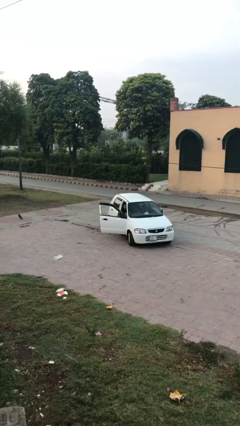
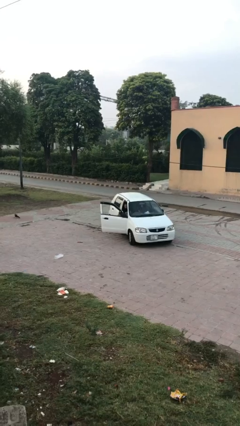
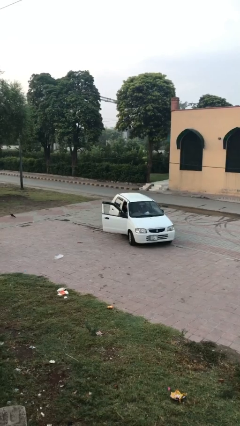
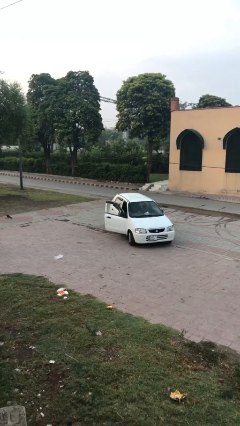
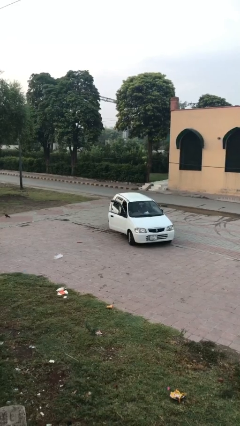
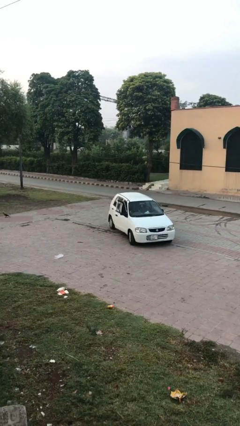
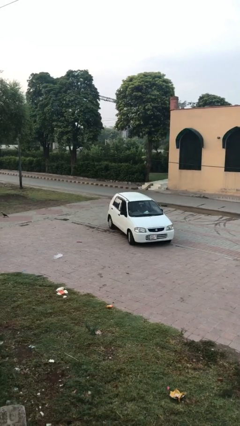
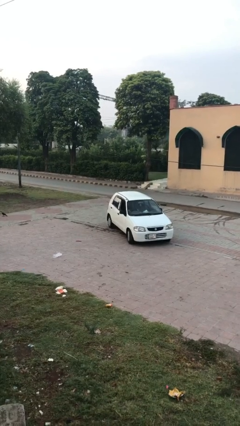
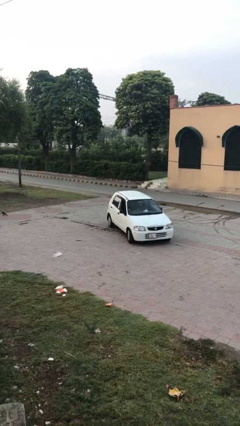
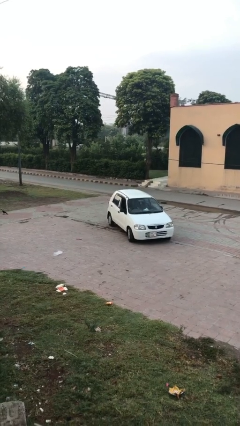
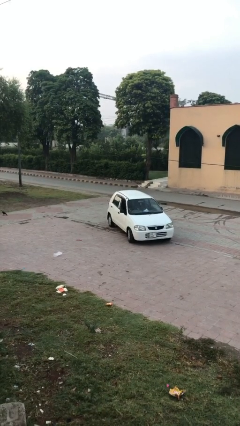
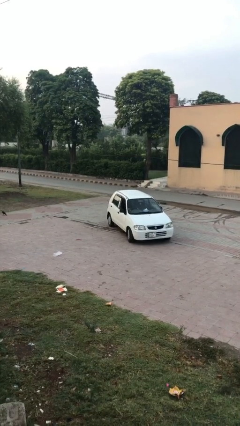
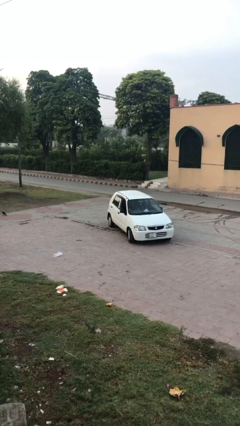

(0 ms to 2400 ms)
person closes car door

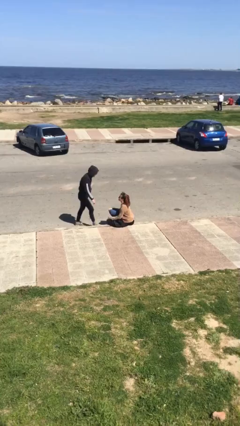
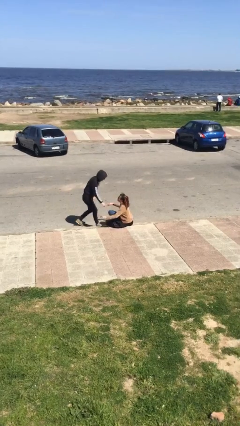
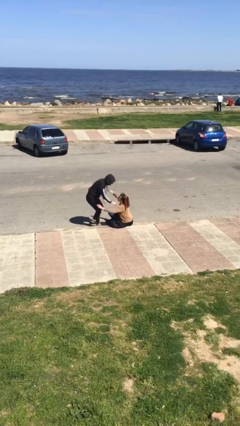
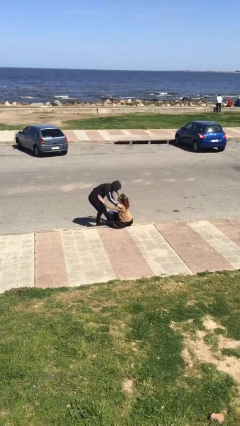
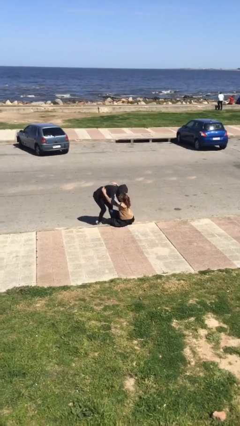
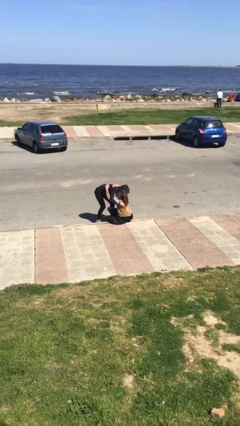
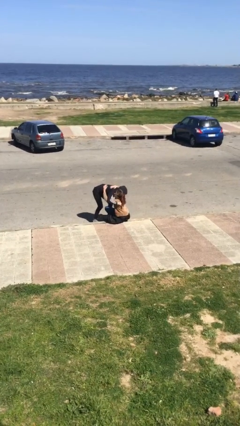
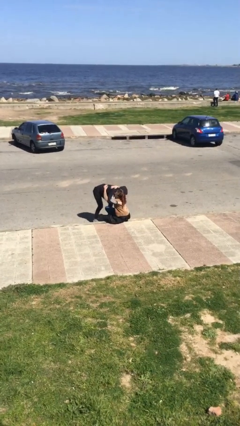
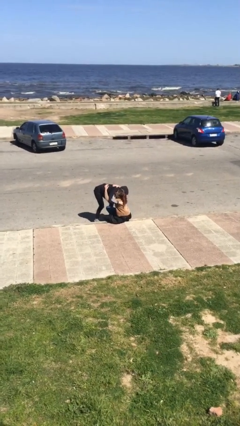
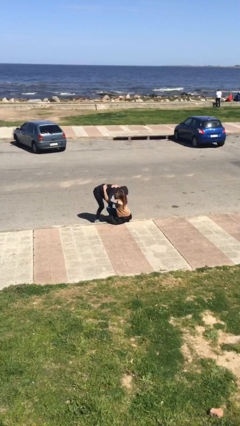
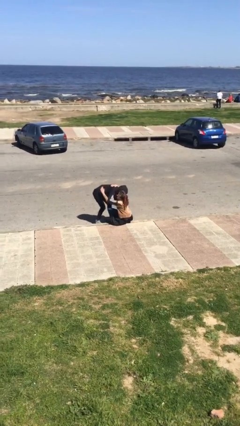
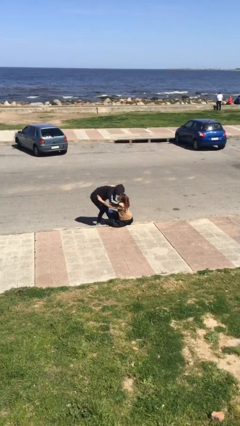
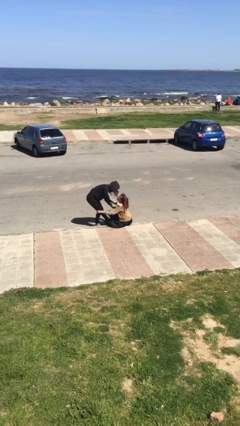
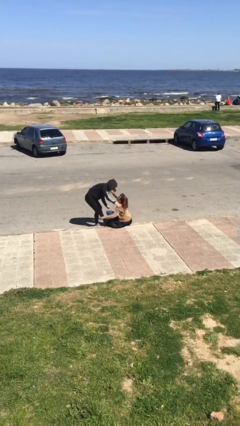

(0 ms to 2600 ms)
person embraces person

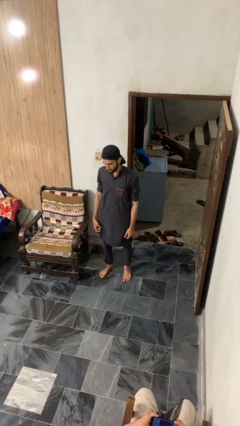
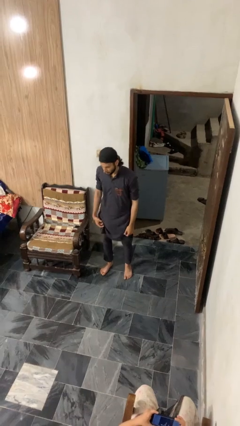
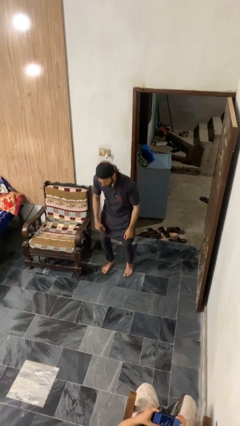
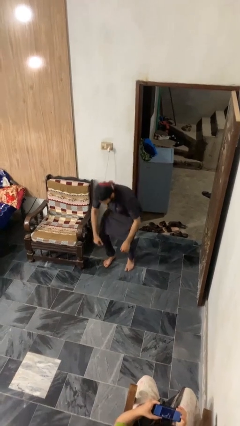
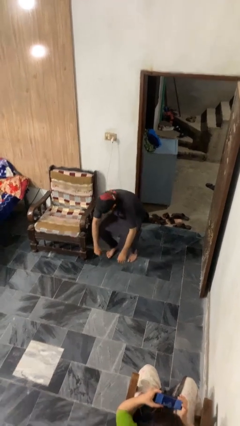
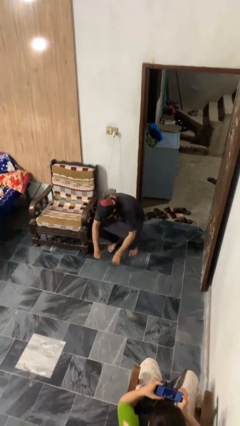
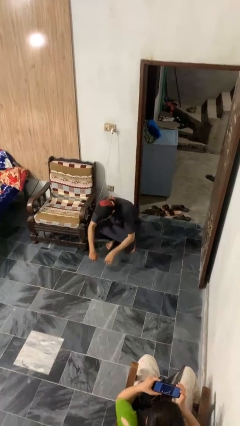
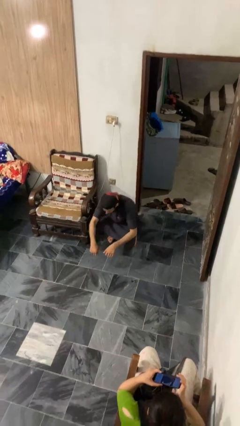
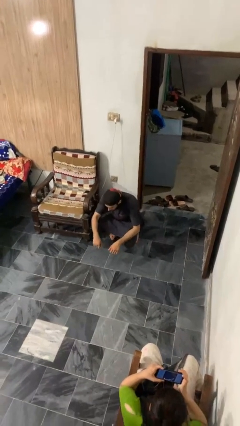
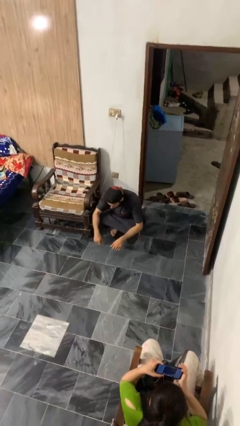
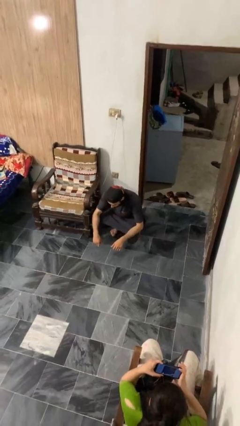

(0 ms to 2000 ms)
person squats

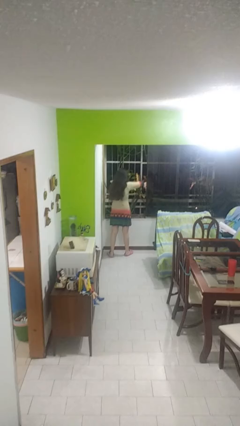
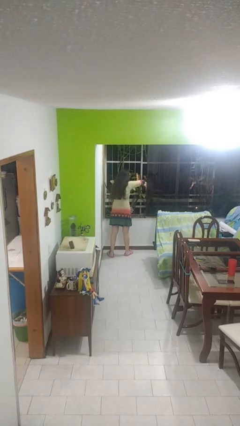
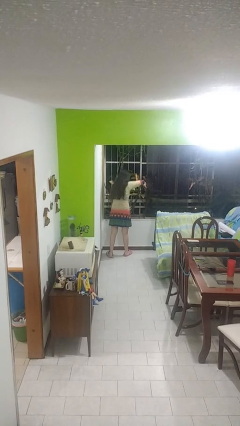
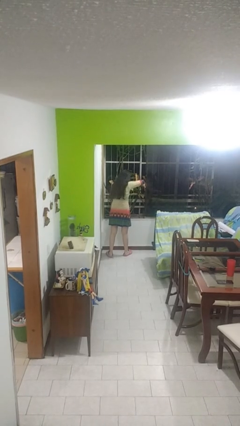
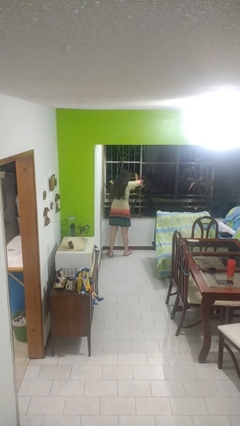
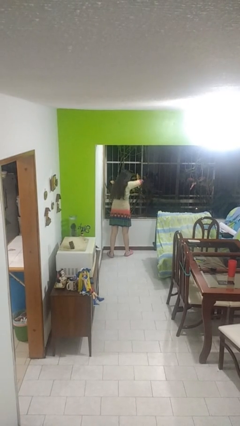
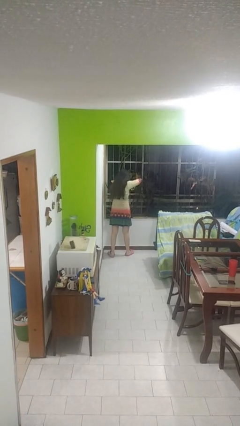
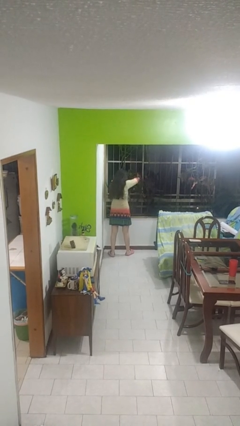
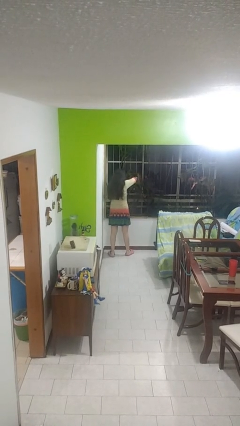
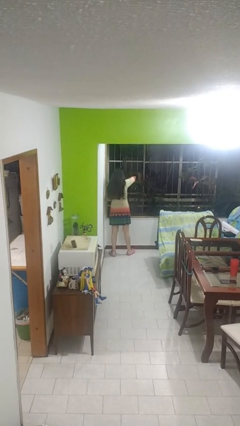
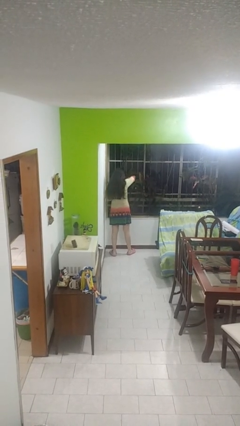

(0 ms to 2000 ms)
person closes home window

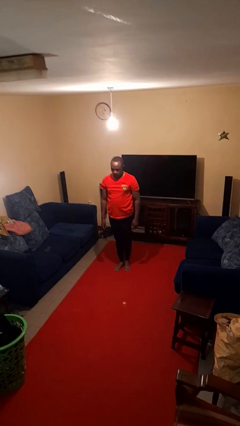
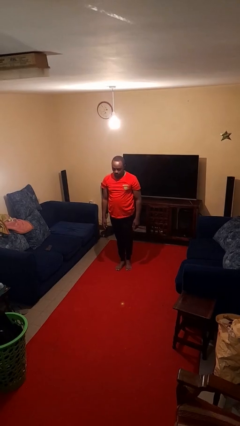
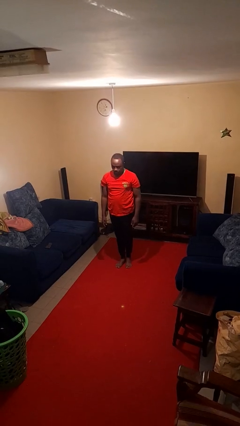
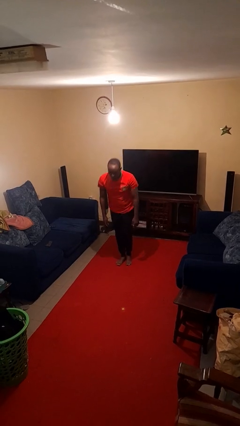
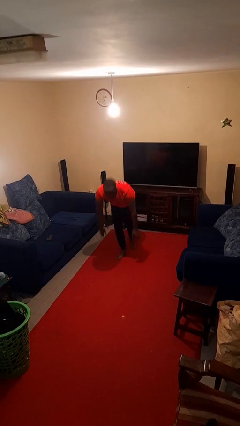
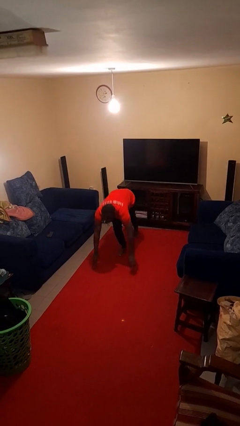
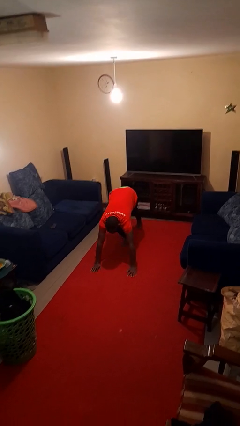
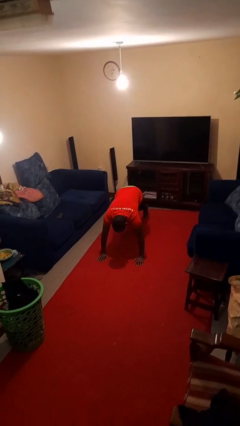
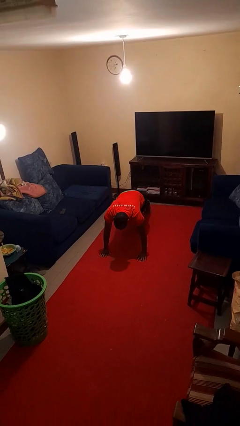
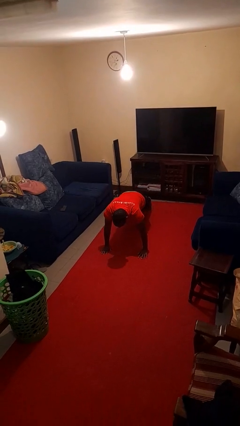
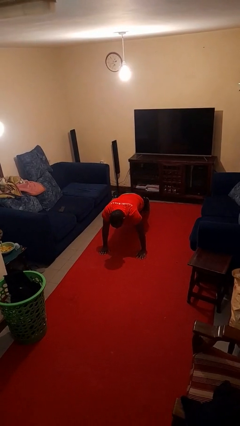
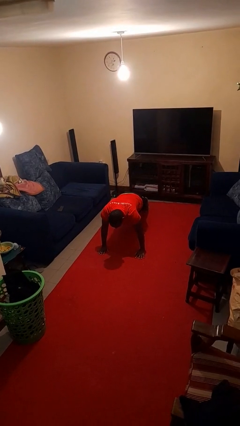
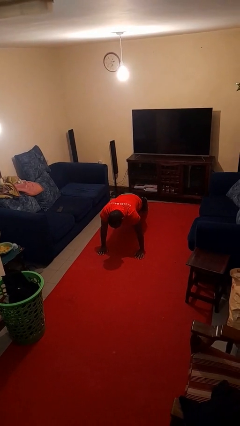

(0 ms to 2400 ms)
person exercises with plank

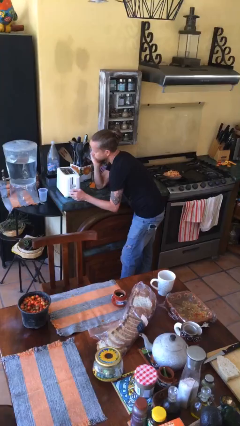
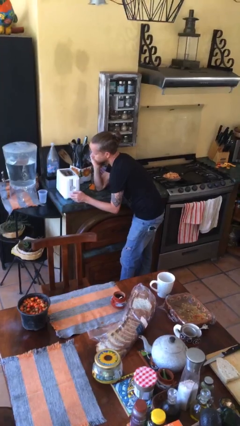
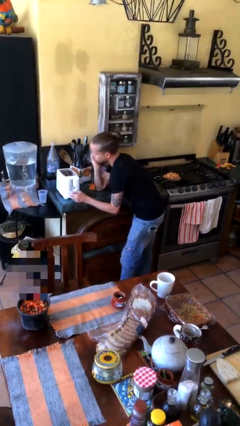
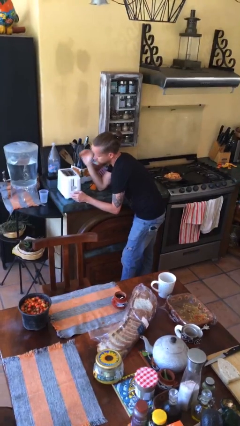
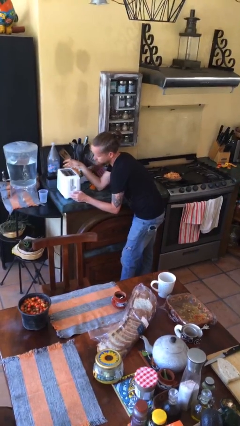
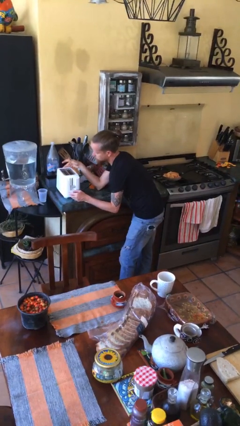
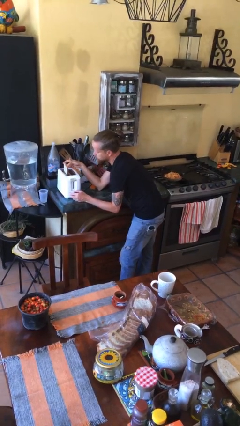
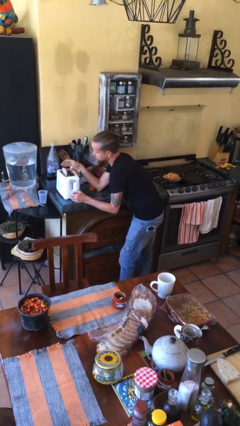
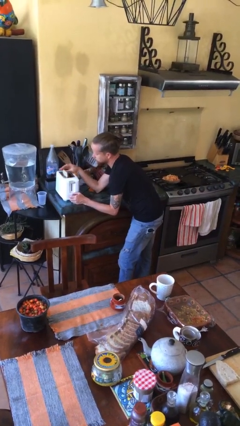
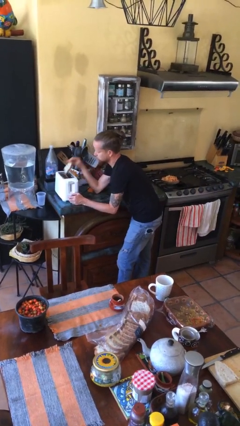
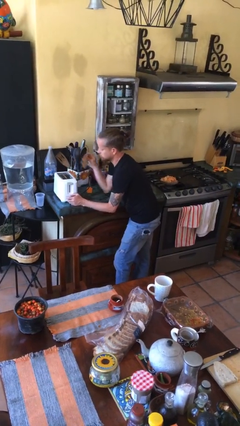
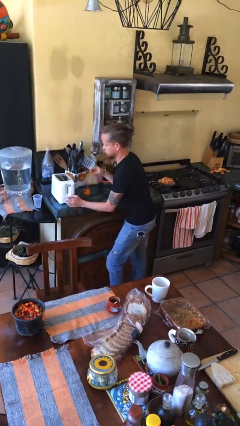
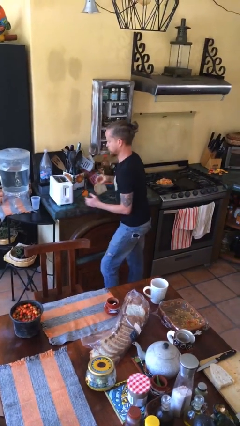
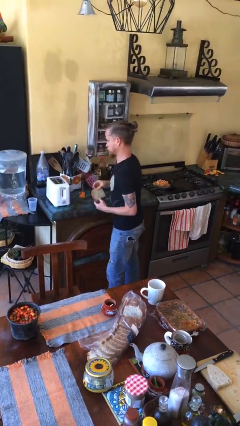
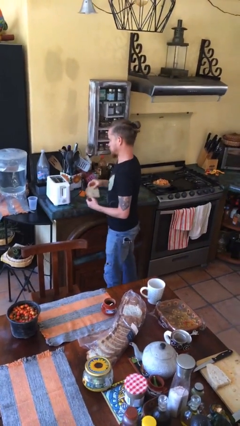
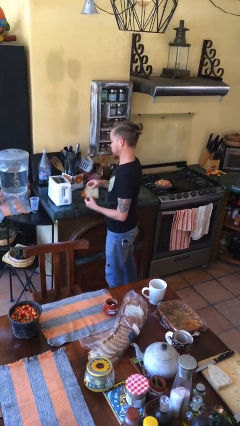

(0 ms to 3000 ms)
person takes object from toaster

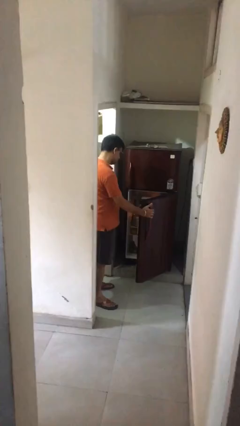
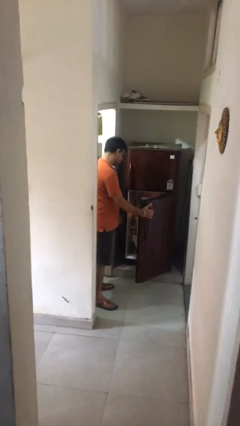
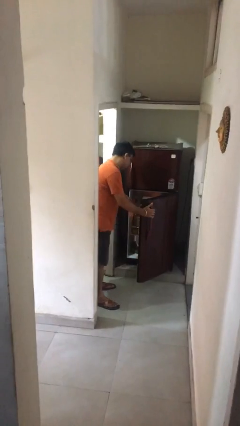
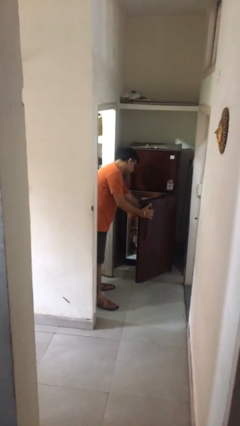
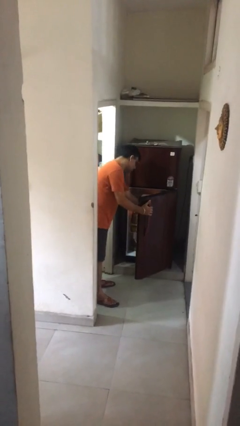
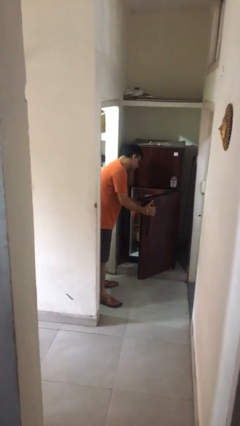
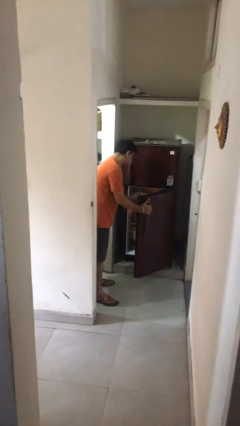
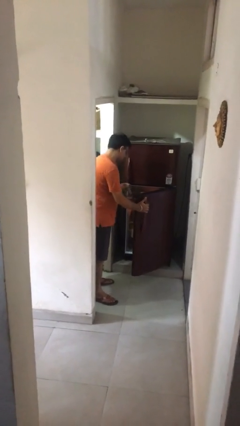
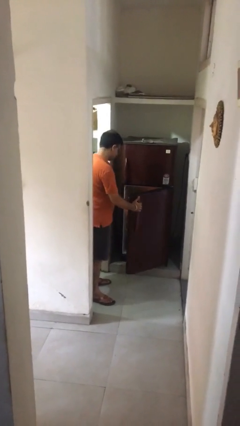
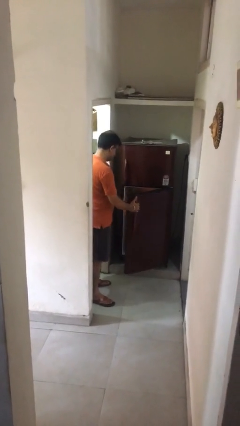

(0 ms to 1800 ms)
person takes object from refrigerator

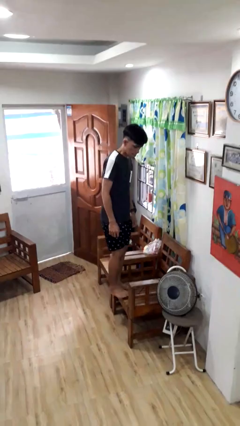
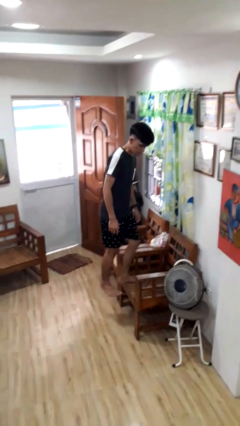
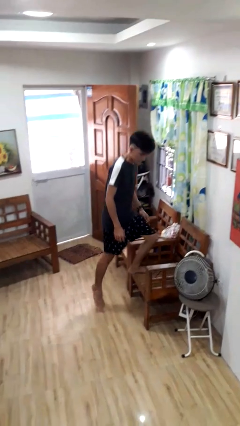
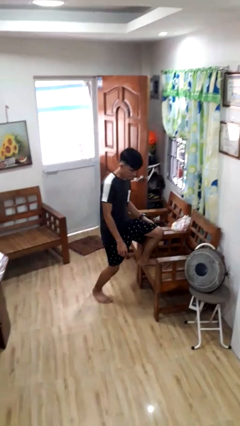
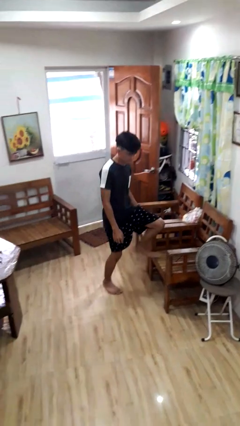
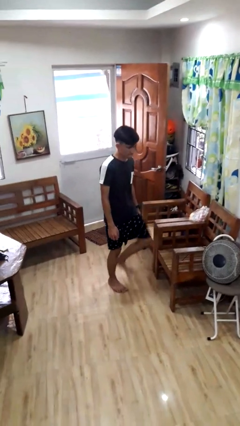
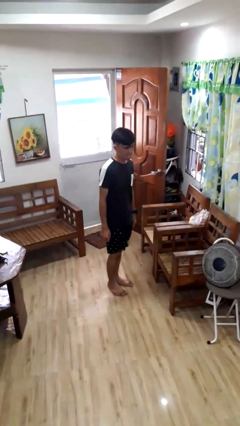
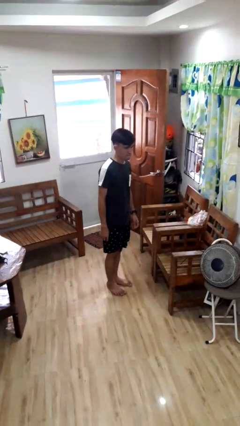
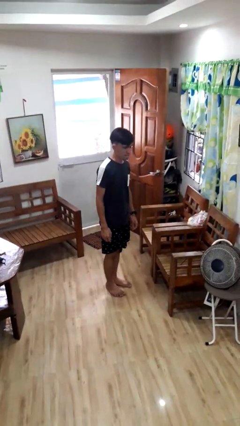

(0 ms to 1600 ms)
person climbs off chair
